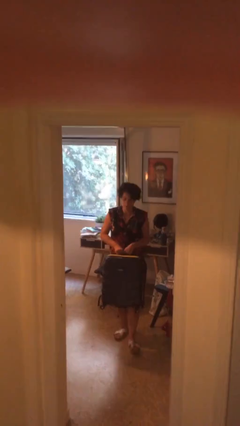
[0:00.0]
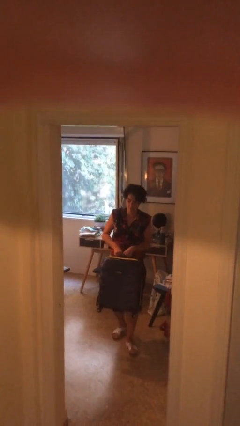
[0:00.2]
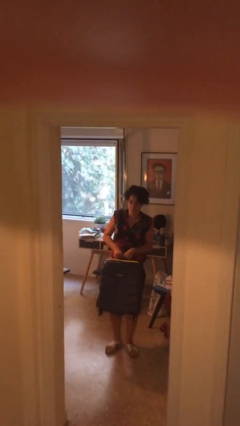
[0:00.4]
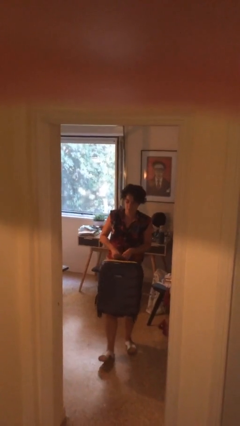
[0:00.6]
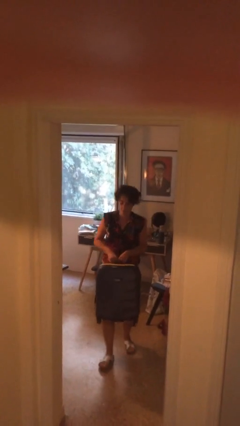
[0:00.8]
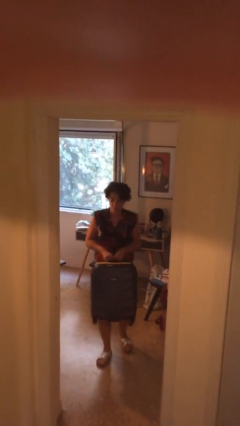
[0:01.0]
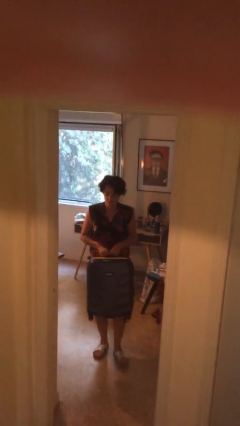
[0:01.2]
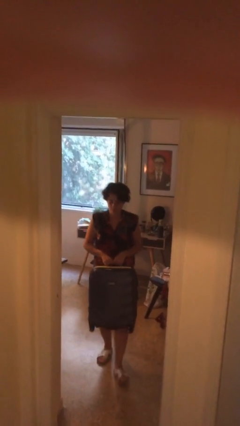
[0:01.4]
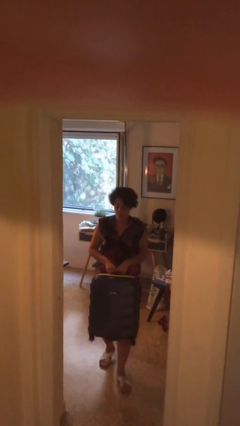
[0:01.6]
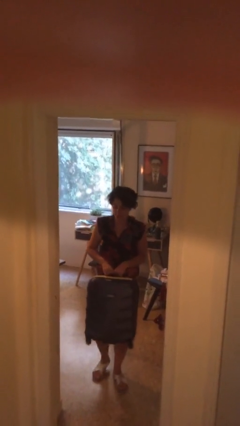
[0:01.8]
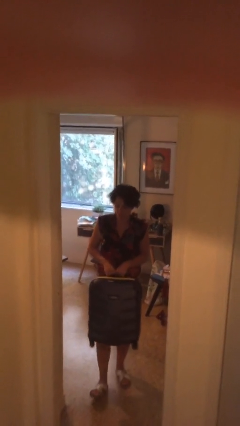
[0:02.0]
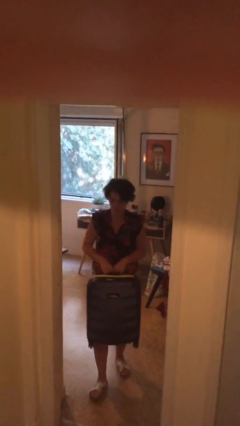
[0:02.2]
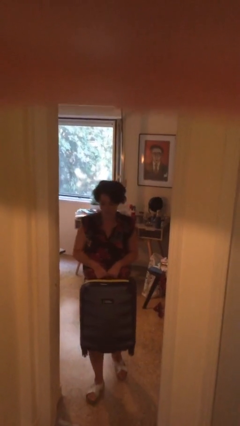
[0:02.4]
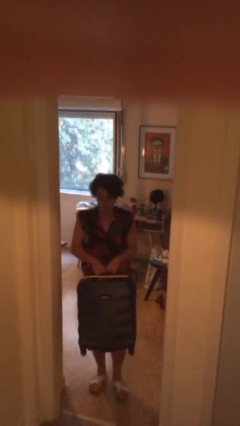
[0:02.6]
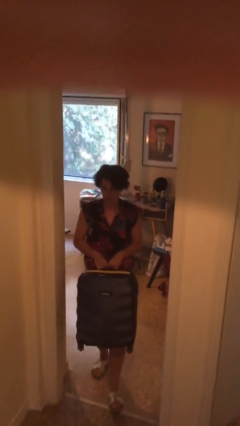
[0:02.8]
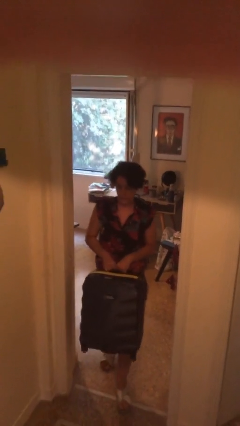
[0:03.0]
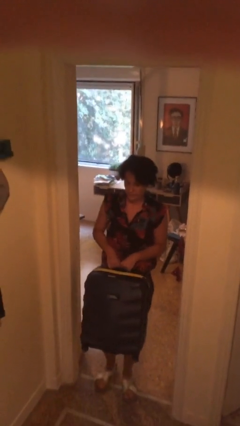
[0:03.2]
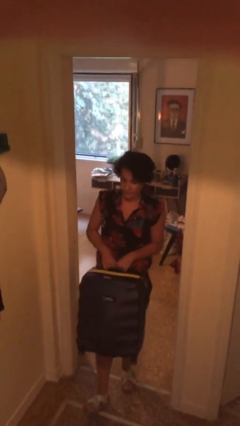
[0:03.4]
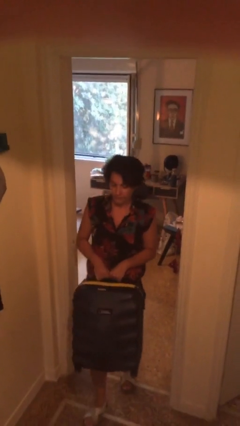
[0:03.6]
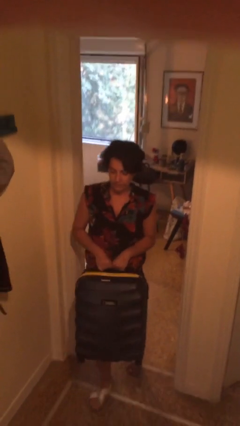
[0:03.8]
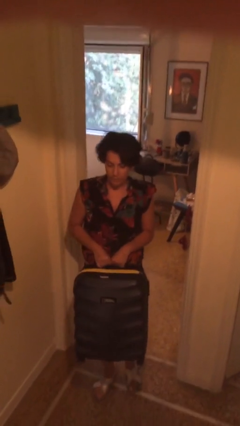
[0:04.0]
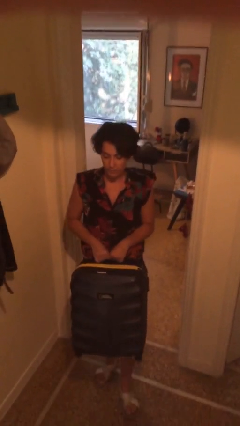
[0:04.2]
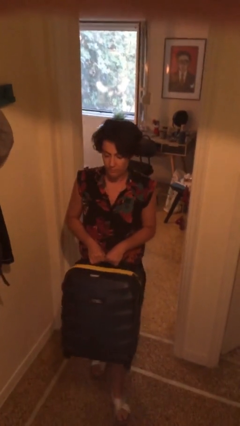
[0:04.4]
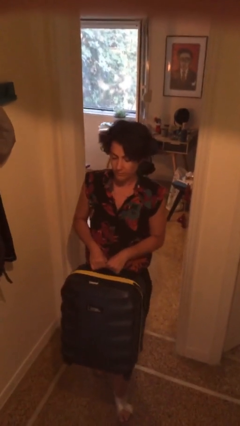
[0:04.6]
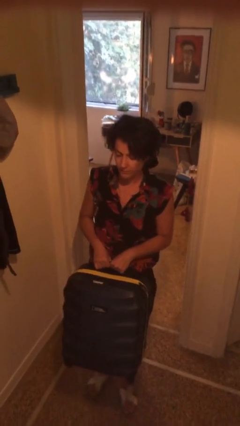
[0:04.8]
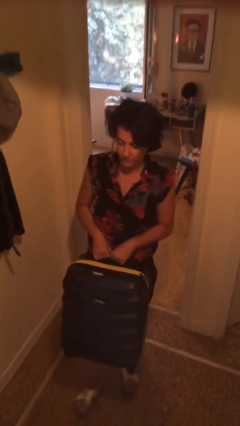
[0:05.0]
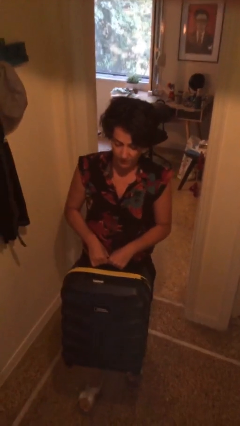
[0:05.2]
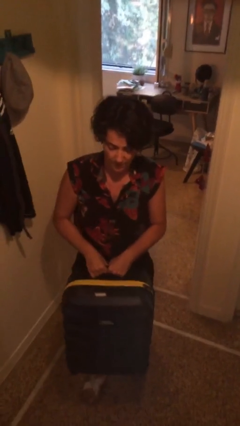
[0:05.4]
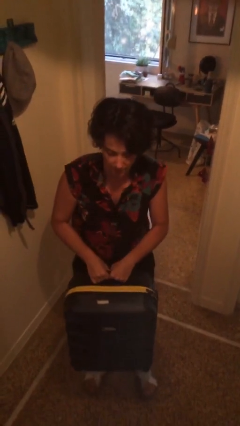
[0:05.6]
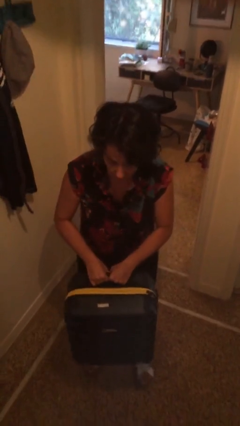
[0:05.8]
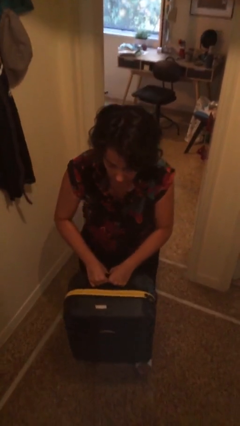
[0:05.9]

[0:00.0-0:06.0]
person carries heavy object

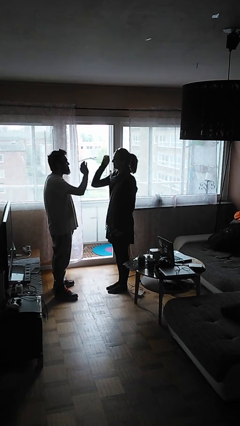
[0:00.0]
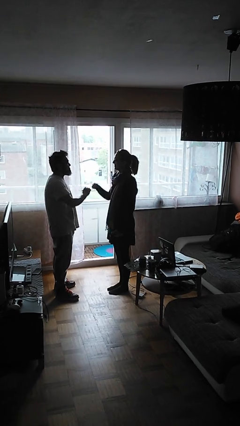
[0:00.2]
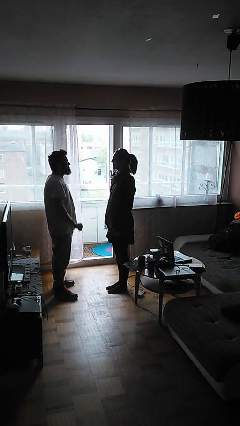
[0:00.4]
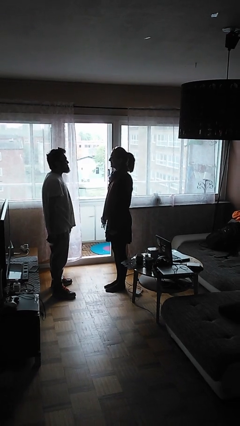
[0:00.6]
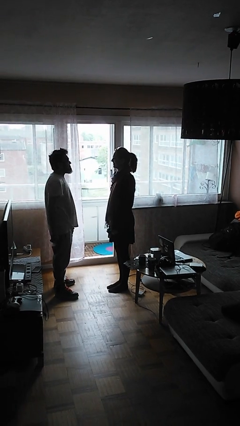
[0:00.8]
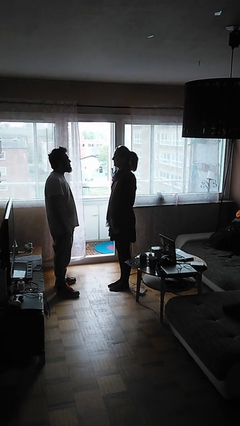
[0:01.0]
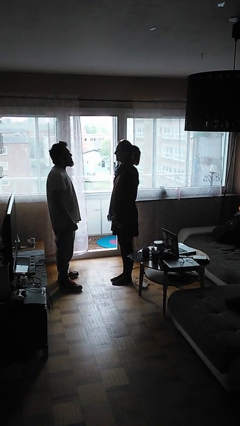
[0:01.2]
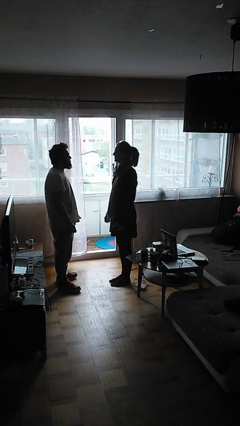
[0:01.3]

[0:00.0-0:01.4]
person highfives hand

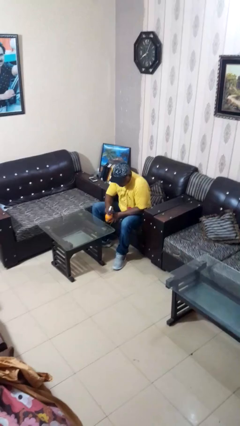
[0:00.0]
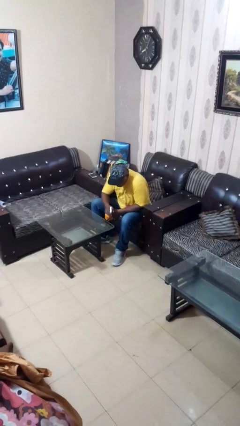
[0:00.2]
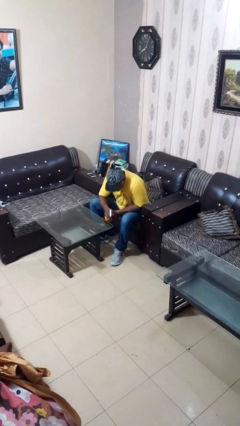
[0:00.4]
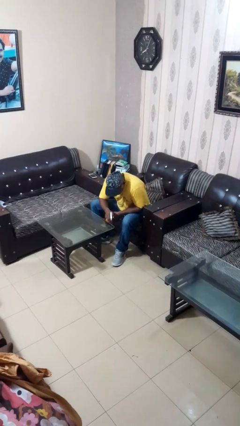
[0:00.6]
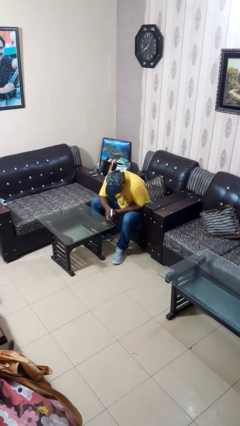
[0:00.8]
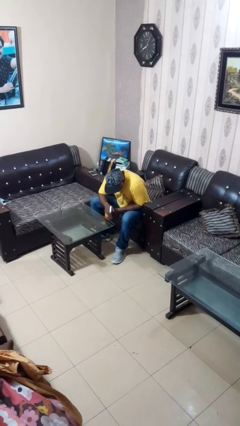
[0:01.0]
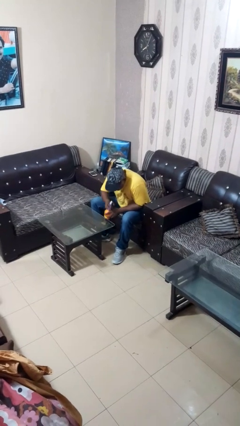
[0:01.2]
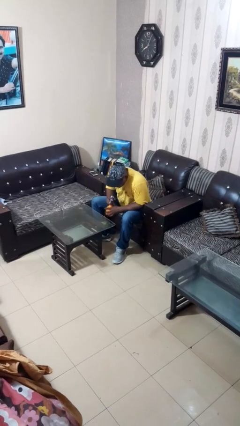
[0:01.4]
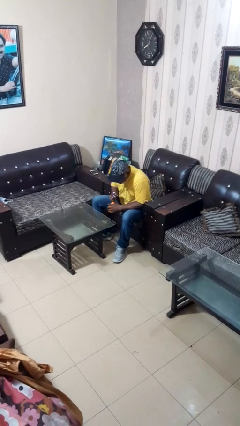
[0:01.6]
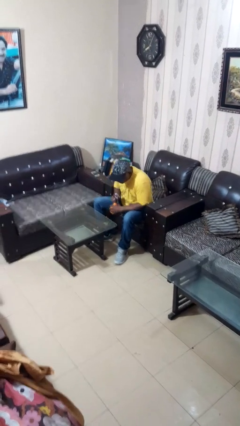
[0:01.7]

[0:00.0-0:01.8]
person sprays from bottle

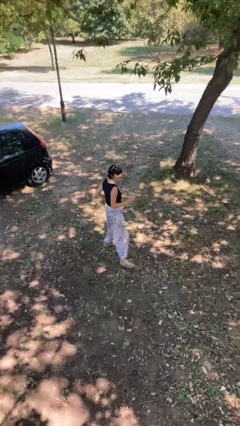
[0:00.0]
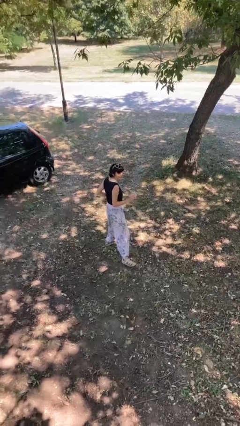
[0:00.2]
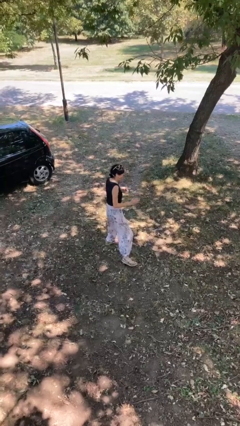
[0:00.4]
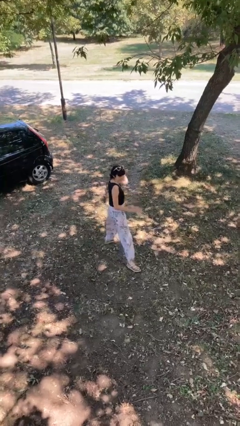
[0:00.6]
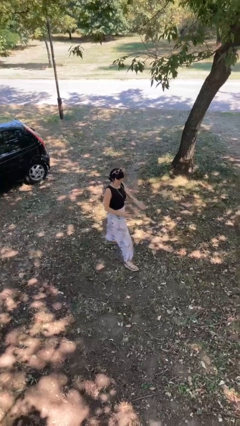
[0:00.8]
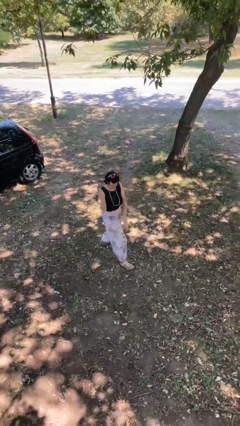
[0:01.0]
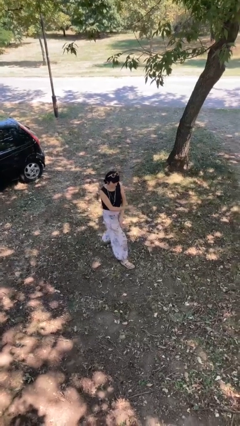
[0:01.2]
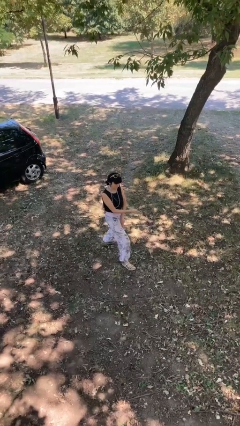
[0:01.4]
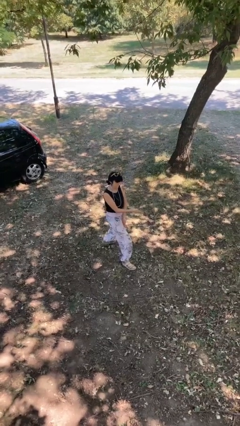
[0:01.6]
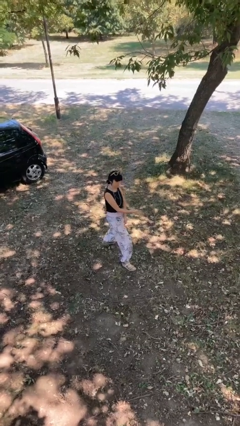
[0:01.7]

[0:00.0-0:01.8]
person karate chop

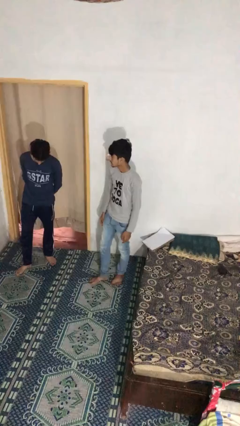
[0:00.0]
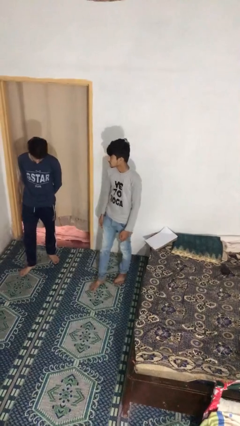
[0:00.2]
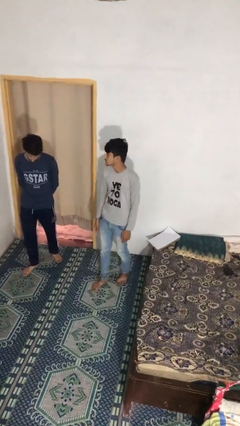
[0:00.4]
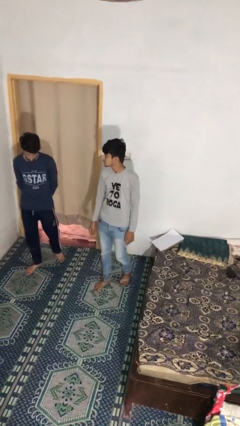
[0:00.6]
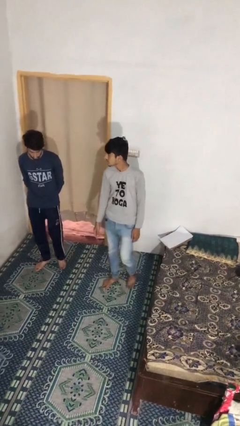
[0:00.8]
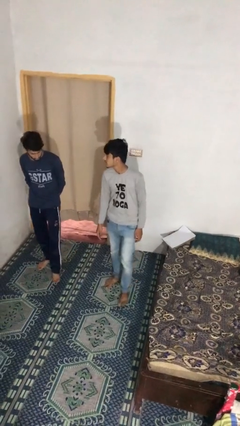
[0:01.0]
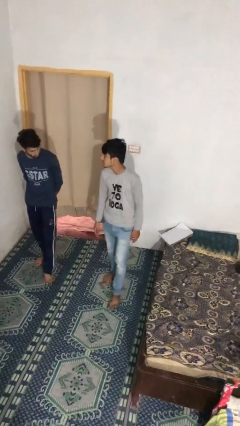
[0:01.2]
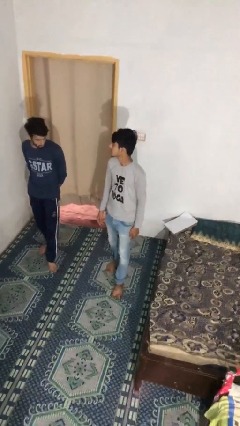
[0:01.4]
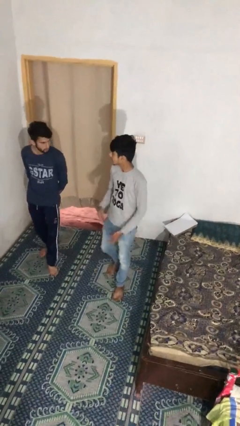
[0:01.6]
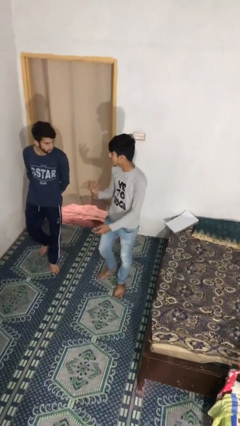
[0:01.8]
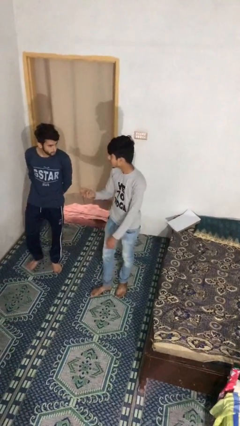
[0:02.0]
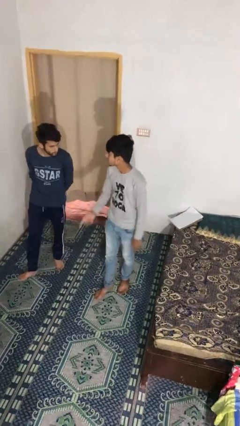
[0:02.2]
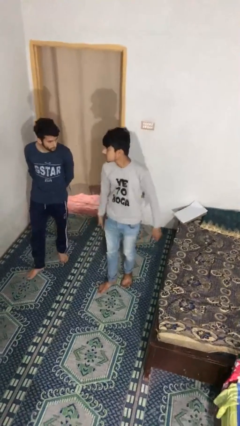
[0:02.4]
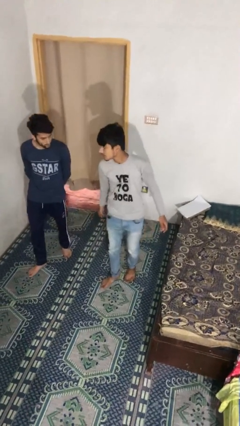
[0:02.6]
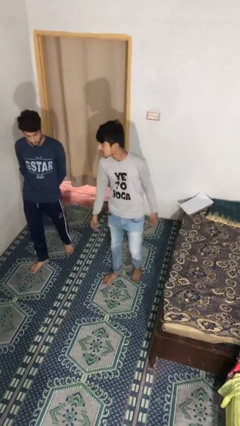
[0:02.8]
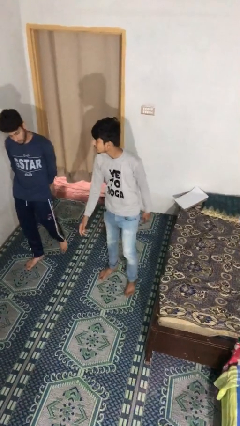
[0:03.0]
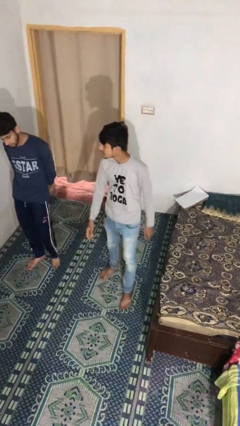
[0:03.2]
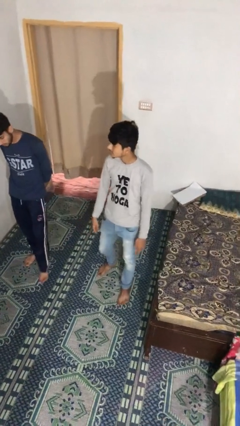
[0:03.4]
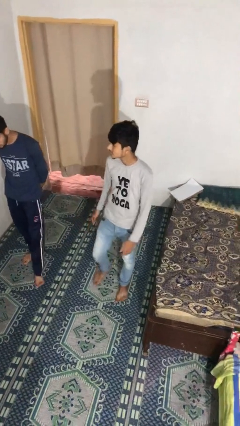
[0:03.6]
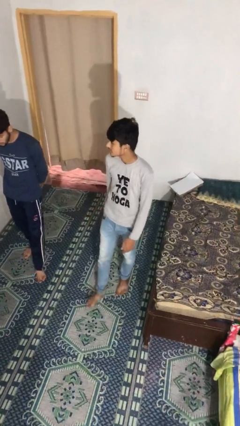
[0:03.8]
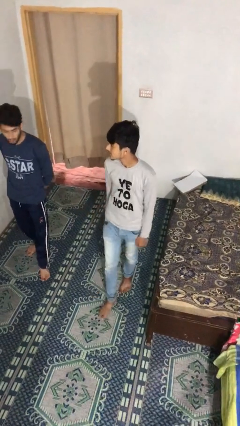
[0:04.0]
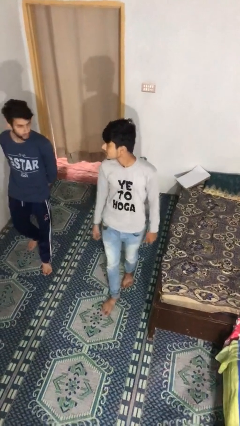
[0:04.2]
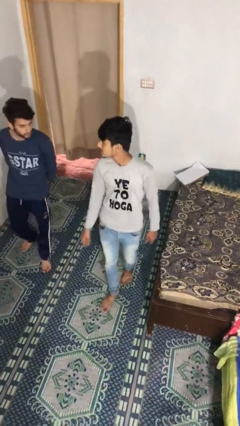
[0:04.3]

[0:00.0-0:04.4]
person talks to person

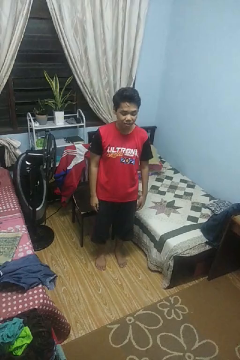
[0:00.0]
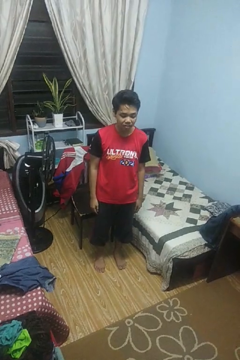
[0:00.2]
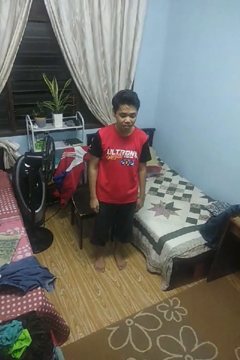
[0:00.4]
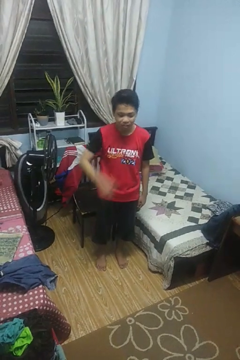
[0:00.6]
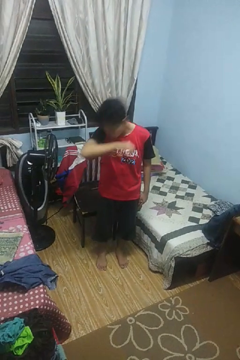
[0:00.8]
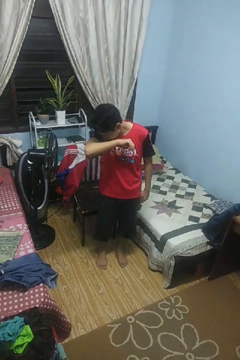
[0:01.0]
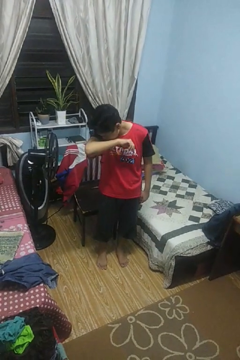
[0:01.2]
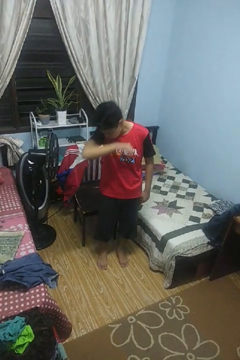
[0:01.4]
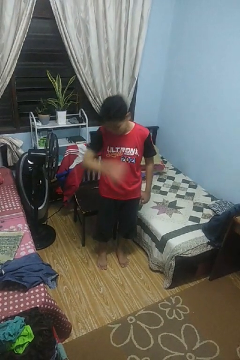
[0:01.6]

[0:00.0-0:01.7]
person sneezes into arm

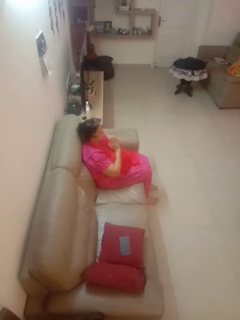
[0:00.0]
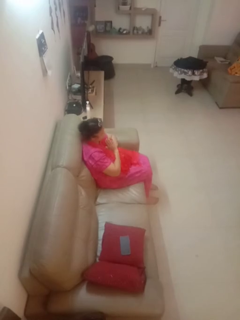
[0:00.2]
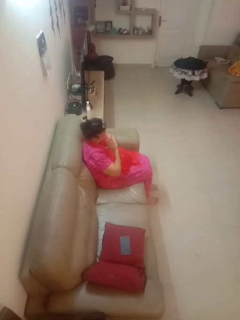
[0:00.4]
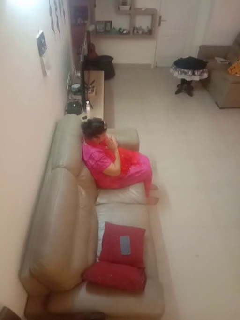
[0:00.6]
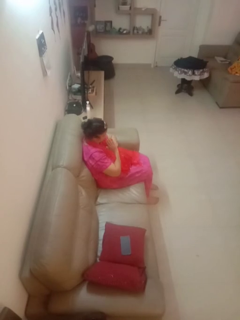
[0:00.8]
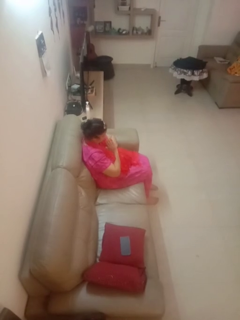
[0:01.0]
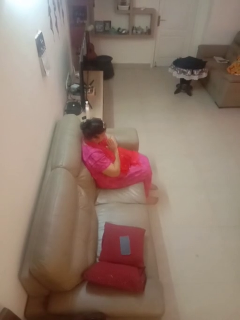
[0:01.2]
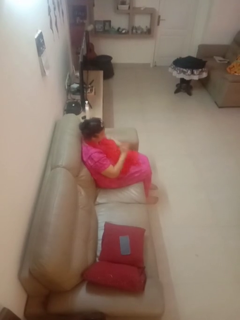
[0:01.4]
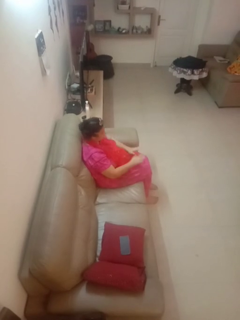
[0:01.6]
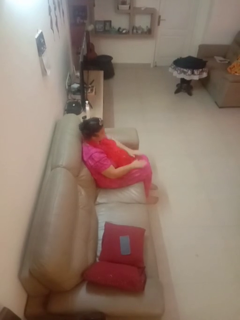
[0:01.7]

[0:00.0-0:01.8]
person prays
